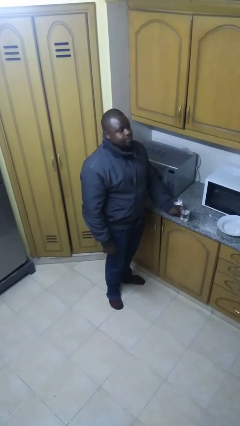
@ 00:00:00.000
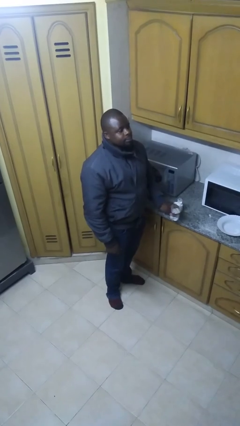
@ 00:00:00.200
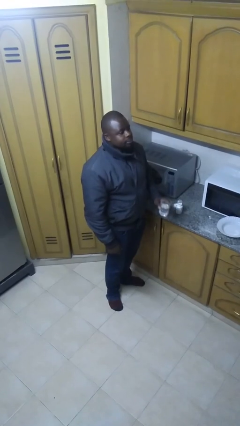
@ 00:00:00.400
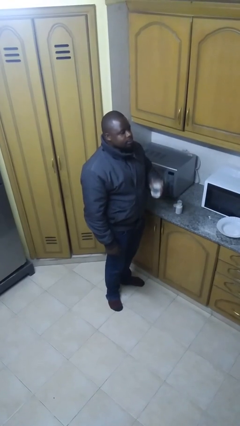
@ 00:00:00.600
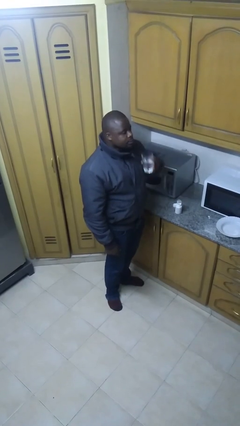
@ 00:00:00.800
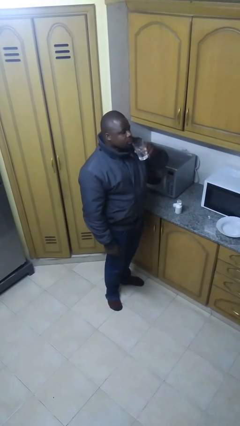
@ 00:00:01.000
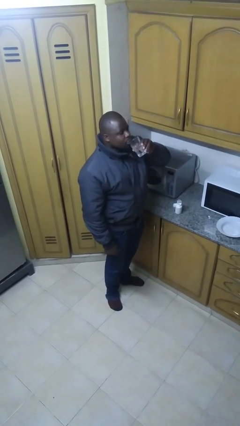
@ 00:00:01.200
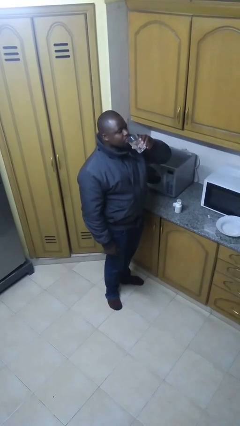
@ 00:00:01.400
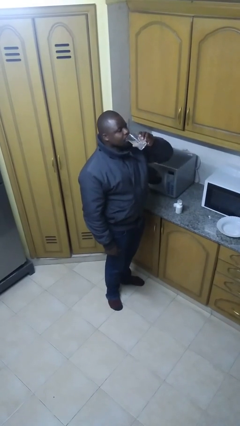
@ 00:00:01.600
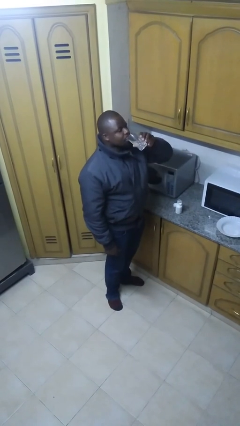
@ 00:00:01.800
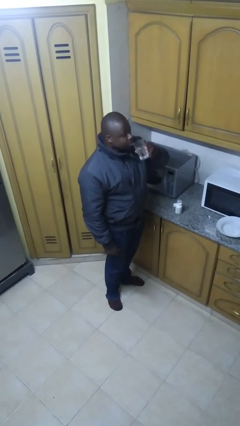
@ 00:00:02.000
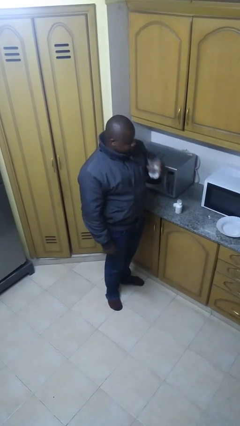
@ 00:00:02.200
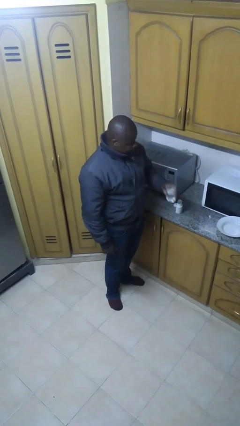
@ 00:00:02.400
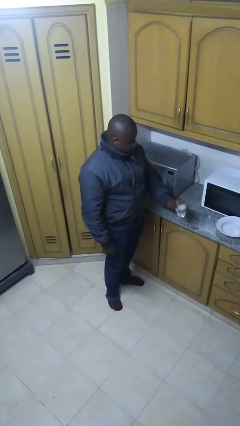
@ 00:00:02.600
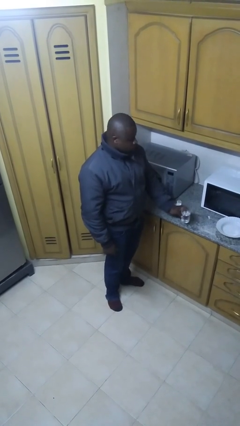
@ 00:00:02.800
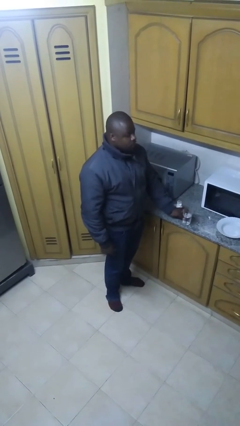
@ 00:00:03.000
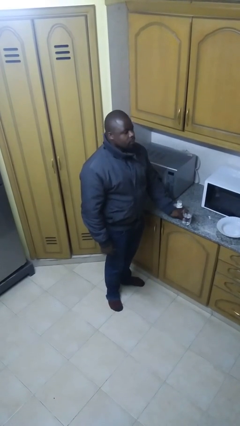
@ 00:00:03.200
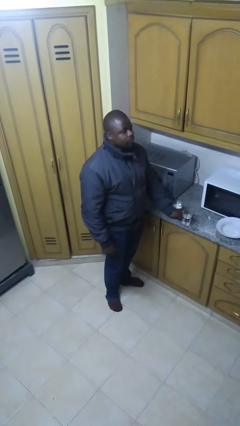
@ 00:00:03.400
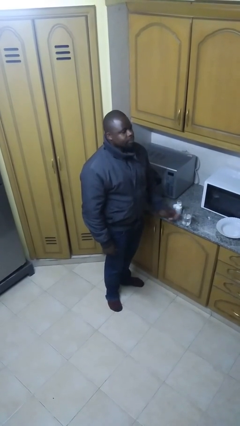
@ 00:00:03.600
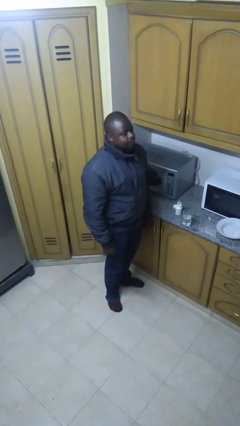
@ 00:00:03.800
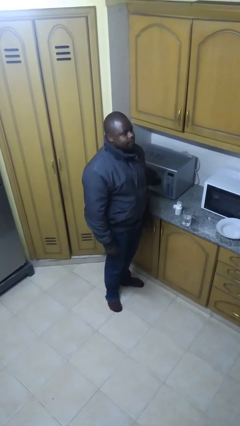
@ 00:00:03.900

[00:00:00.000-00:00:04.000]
person drinks from cup

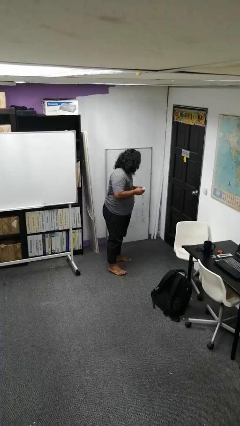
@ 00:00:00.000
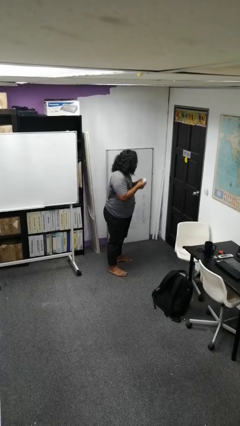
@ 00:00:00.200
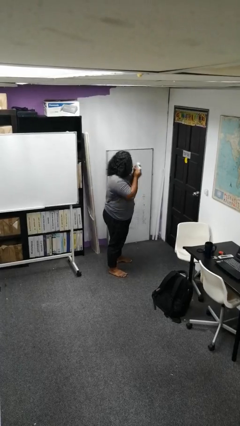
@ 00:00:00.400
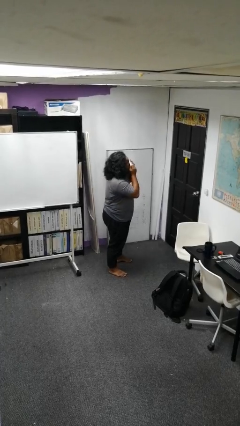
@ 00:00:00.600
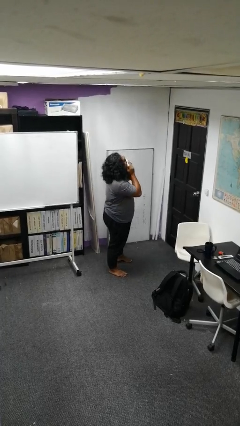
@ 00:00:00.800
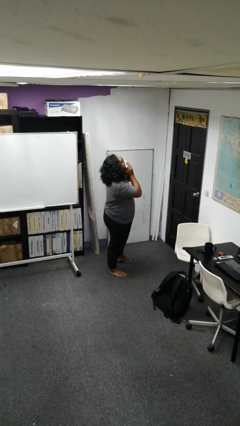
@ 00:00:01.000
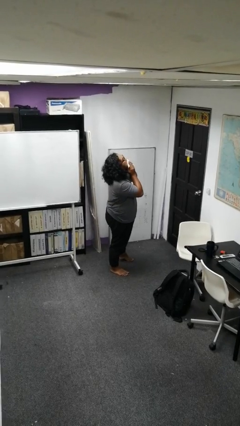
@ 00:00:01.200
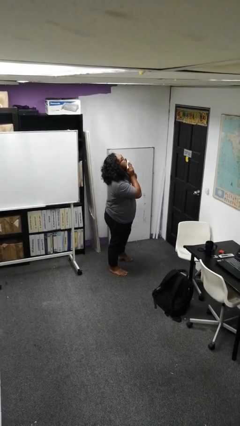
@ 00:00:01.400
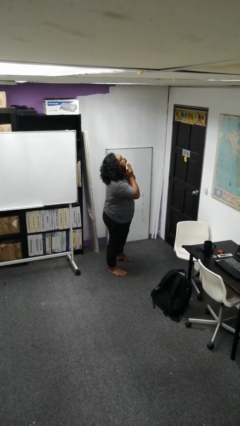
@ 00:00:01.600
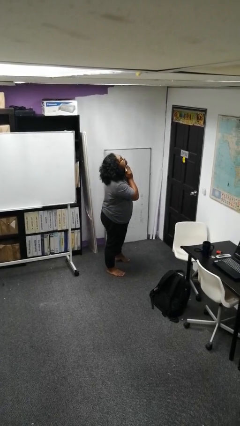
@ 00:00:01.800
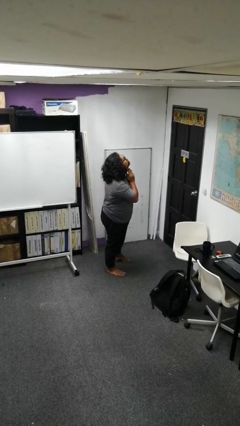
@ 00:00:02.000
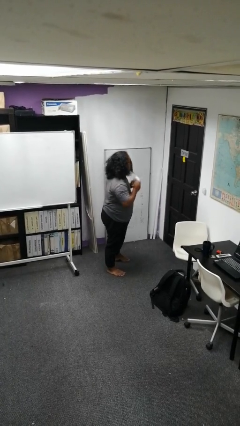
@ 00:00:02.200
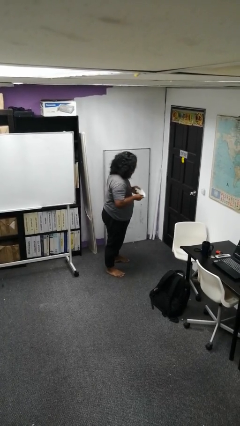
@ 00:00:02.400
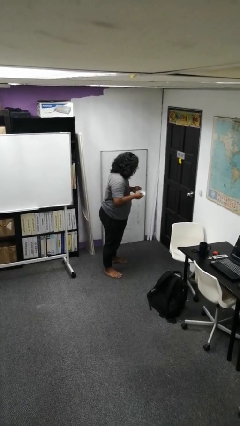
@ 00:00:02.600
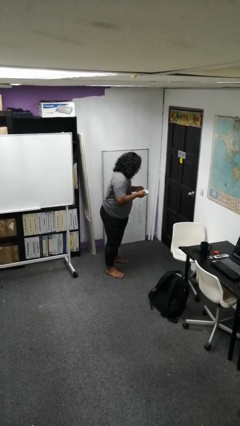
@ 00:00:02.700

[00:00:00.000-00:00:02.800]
person wipes mouth with napkin

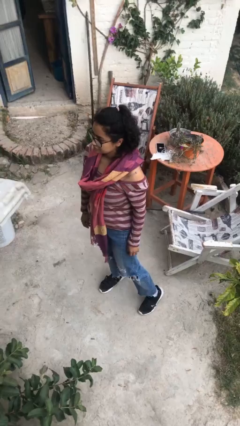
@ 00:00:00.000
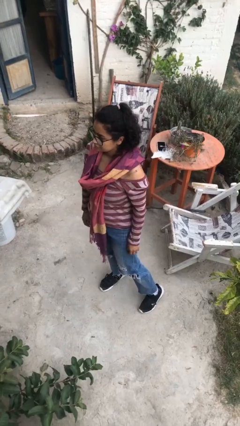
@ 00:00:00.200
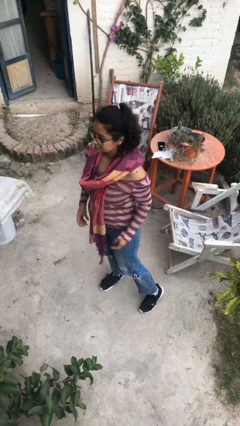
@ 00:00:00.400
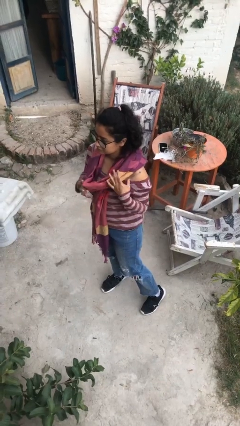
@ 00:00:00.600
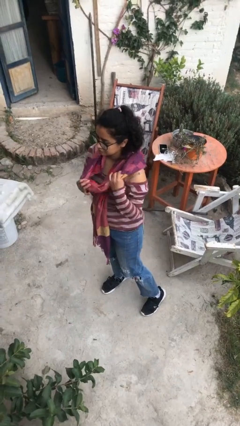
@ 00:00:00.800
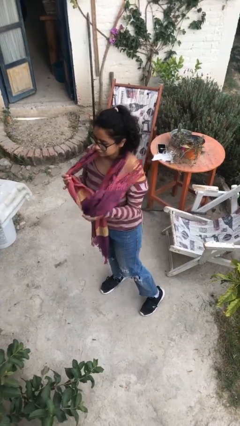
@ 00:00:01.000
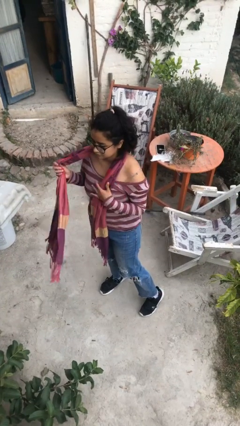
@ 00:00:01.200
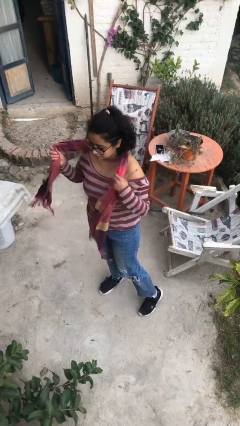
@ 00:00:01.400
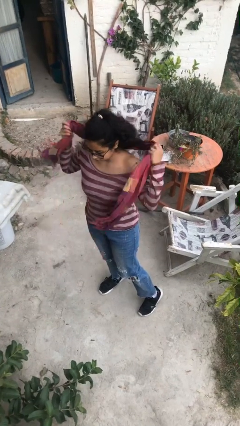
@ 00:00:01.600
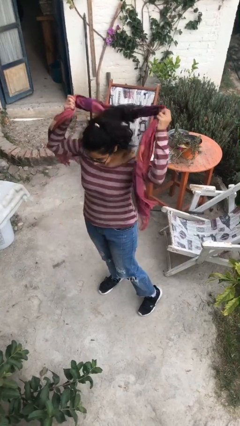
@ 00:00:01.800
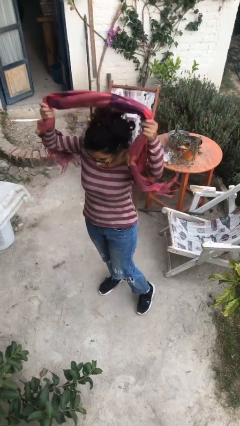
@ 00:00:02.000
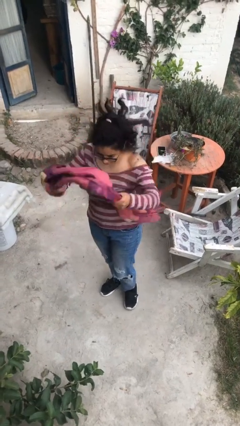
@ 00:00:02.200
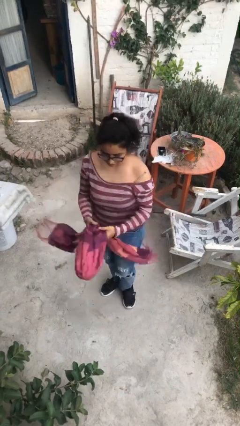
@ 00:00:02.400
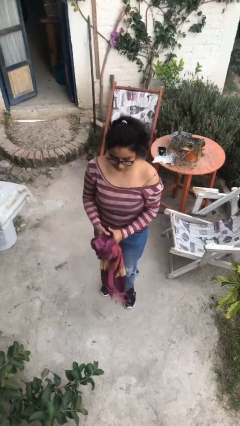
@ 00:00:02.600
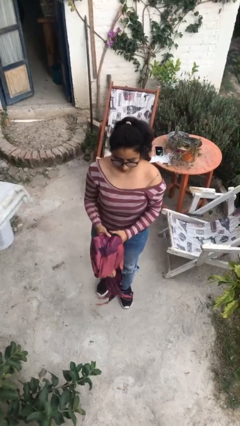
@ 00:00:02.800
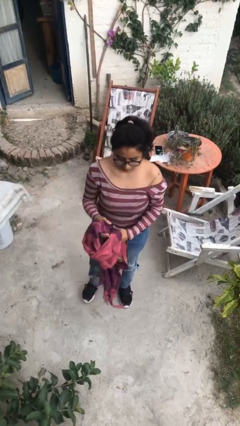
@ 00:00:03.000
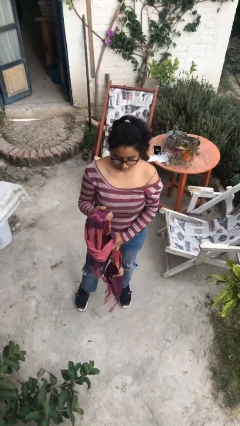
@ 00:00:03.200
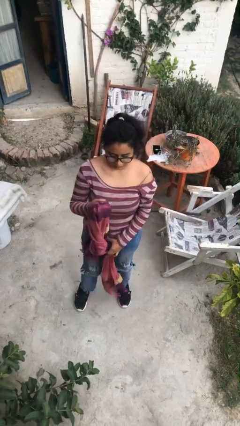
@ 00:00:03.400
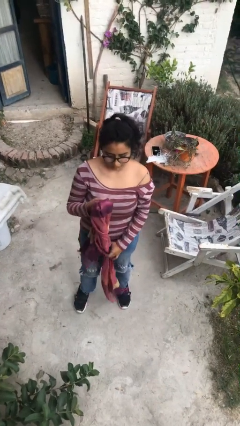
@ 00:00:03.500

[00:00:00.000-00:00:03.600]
person takes off scarf

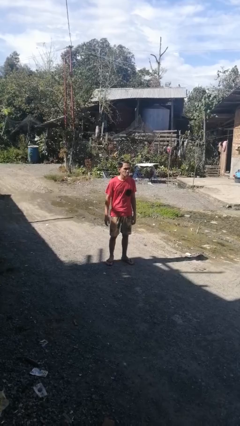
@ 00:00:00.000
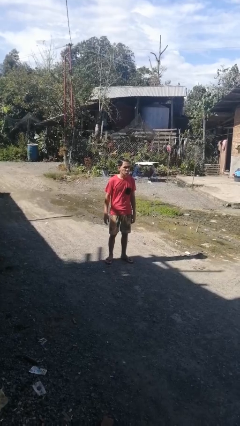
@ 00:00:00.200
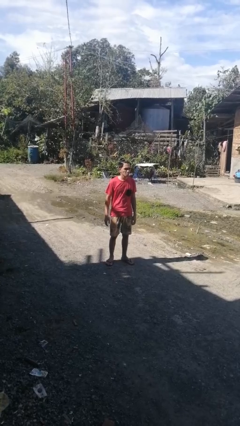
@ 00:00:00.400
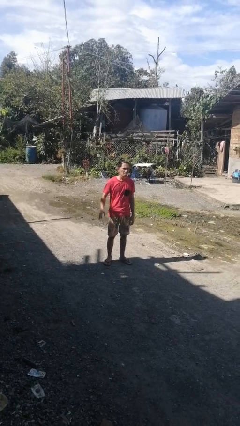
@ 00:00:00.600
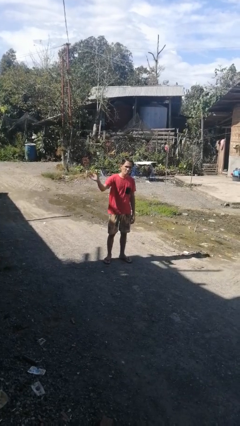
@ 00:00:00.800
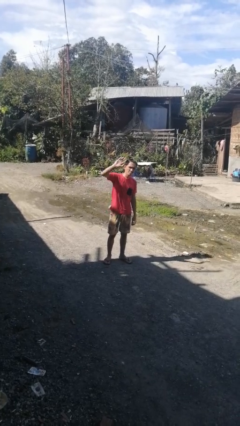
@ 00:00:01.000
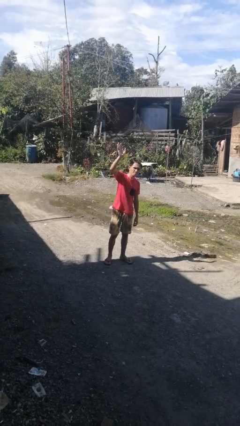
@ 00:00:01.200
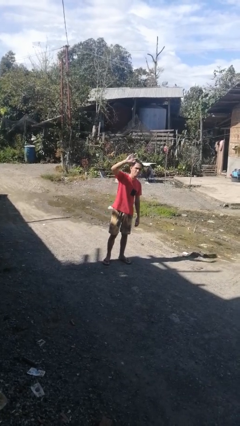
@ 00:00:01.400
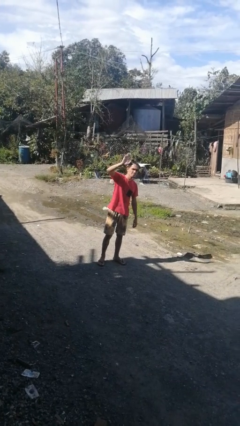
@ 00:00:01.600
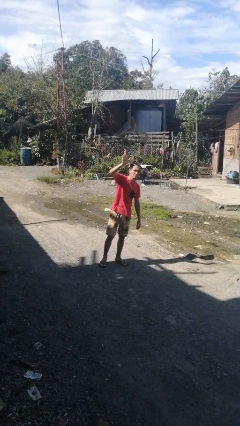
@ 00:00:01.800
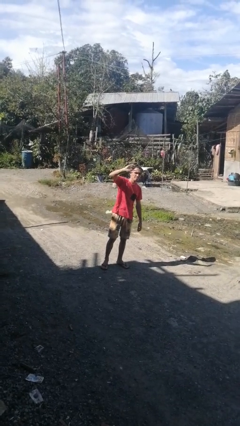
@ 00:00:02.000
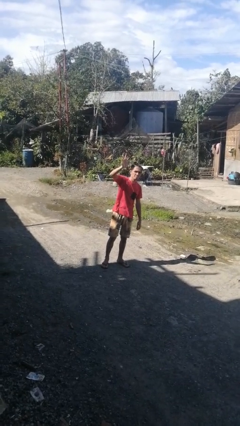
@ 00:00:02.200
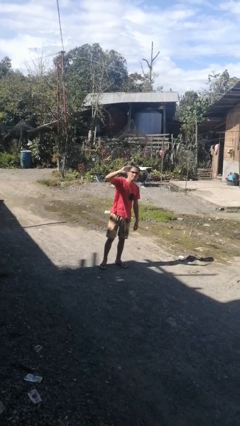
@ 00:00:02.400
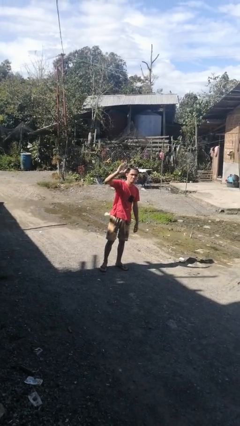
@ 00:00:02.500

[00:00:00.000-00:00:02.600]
person waves at person

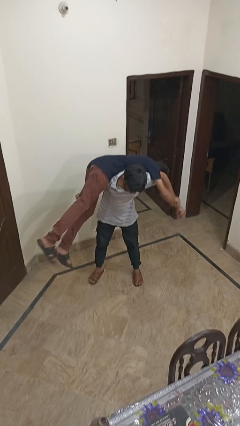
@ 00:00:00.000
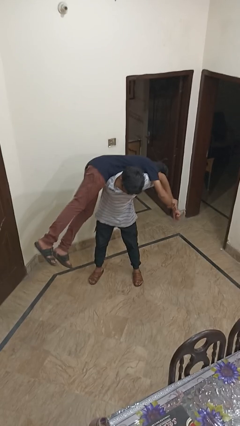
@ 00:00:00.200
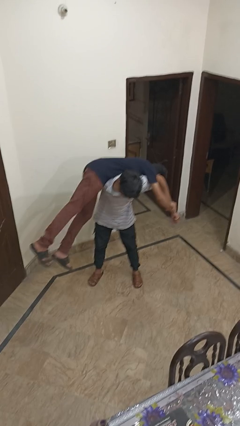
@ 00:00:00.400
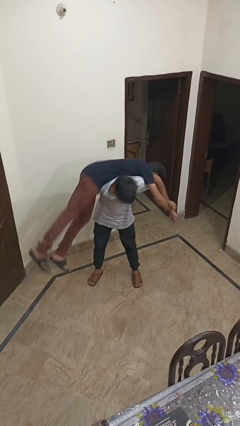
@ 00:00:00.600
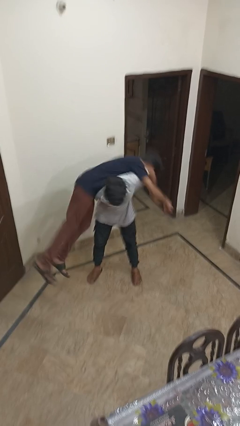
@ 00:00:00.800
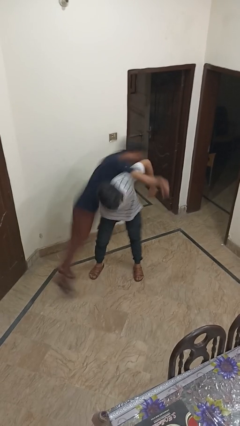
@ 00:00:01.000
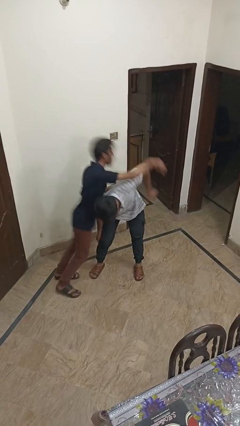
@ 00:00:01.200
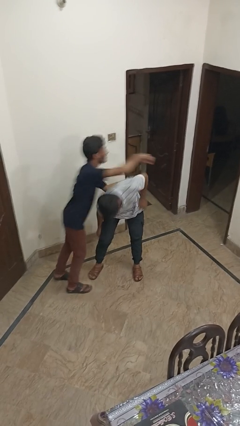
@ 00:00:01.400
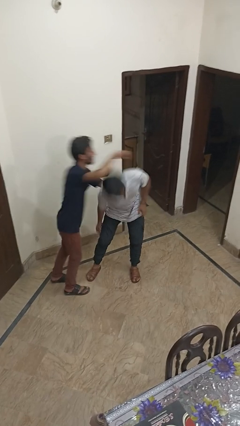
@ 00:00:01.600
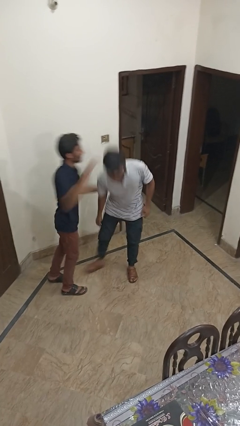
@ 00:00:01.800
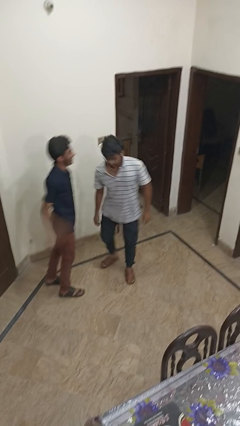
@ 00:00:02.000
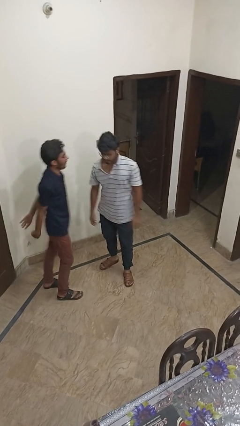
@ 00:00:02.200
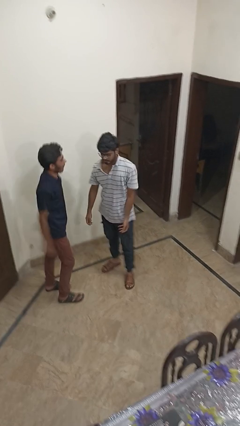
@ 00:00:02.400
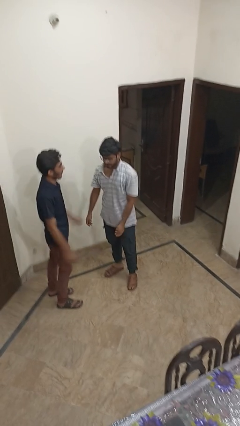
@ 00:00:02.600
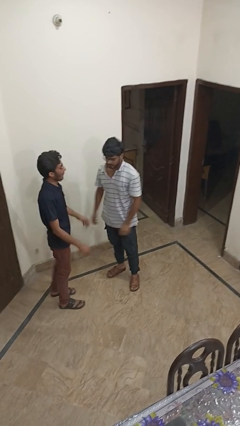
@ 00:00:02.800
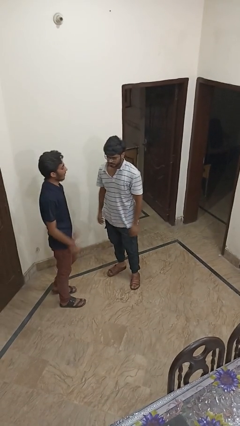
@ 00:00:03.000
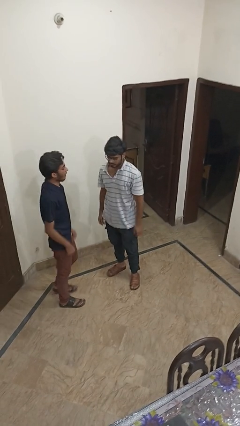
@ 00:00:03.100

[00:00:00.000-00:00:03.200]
person puts down person

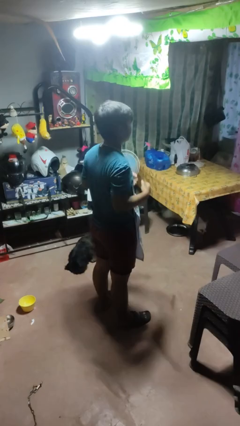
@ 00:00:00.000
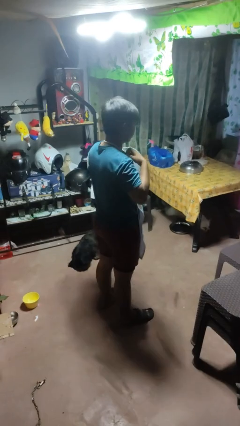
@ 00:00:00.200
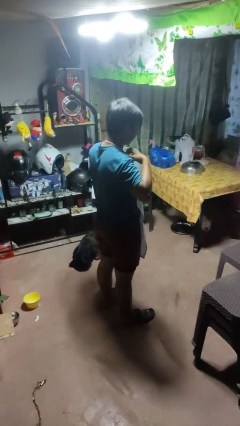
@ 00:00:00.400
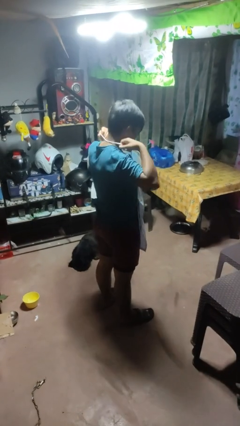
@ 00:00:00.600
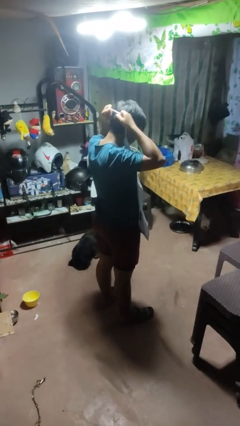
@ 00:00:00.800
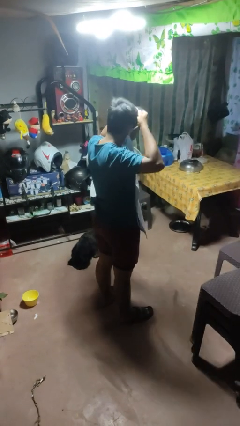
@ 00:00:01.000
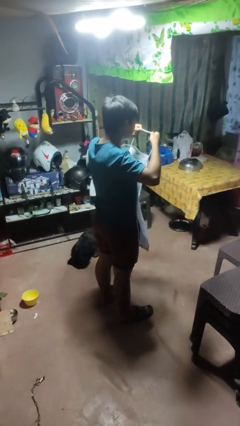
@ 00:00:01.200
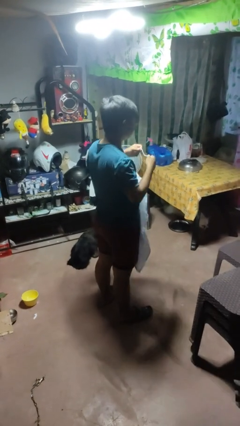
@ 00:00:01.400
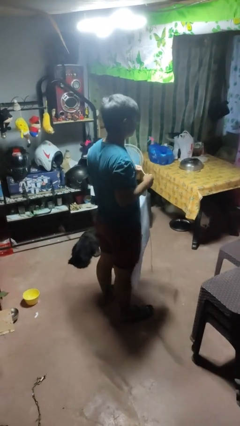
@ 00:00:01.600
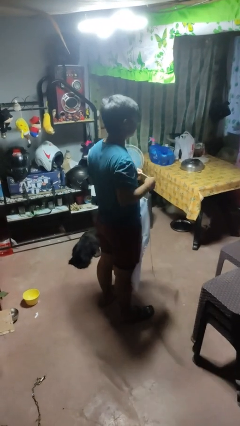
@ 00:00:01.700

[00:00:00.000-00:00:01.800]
person takes off apron
